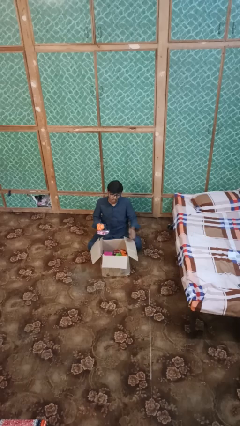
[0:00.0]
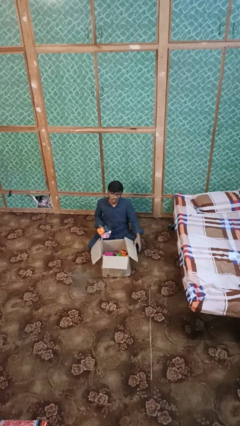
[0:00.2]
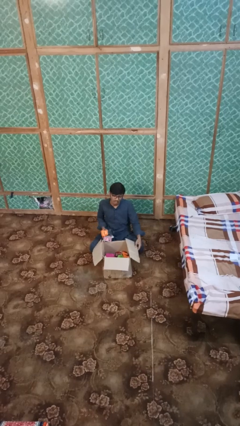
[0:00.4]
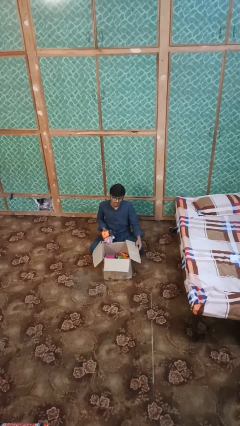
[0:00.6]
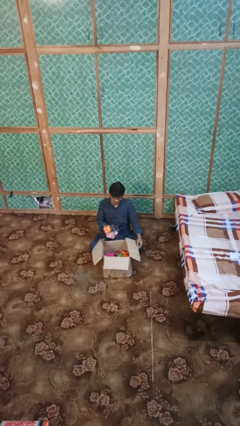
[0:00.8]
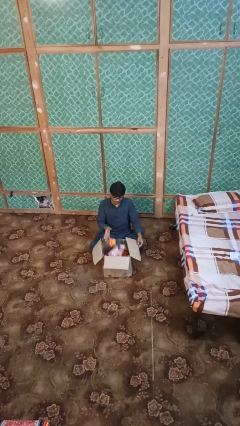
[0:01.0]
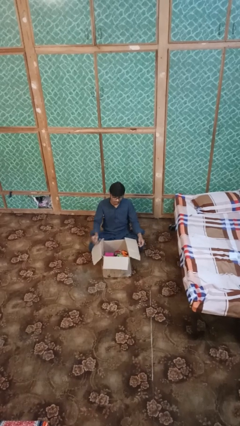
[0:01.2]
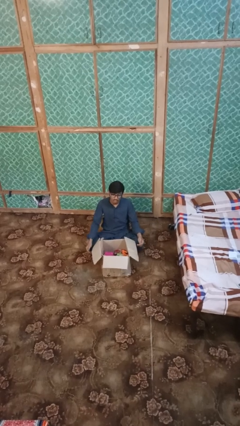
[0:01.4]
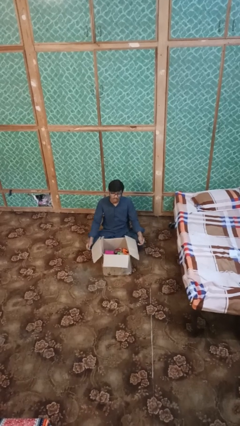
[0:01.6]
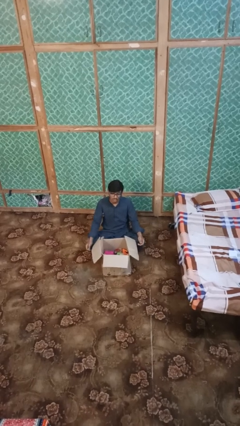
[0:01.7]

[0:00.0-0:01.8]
person puts object into box

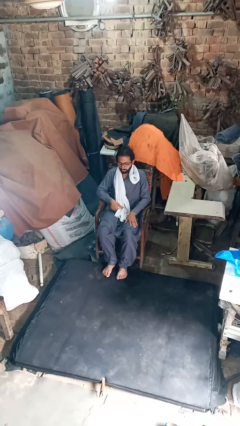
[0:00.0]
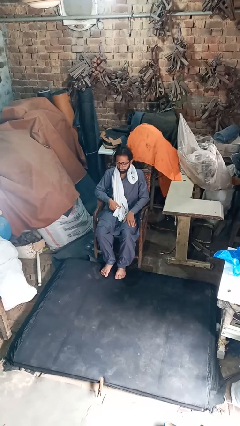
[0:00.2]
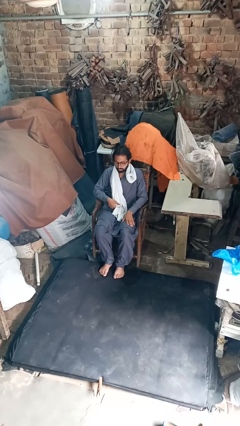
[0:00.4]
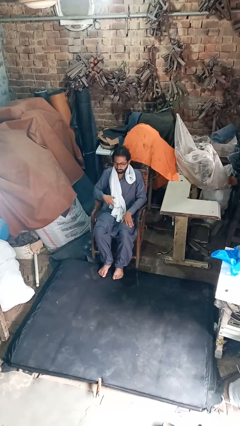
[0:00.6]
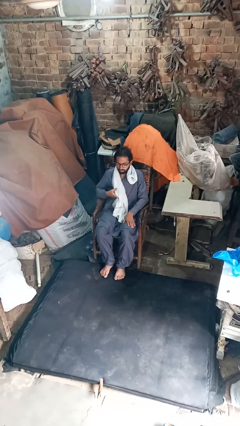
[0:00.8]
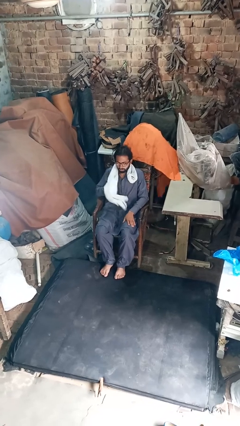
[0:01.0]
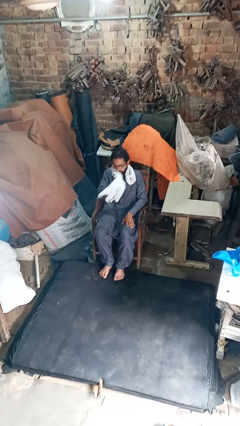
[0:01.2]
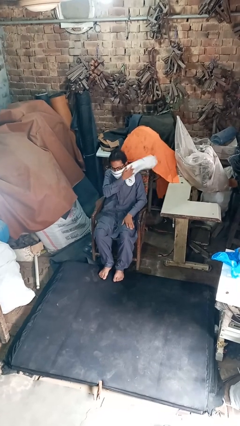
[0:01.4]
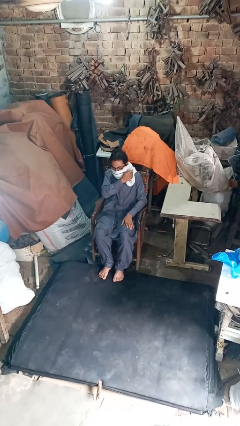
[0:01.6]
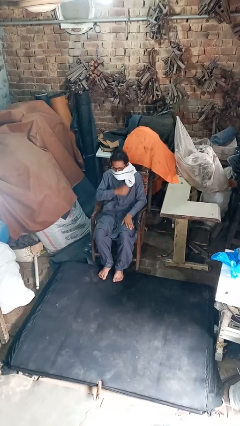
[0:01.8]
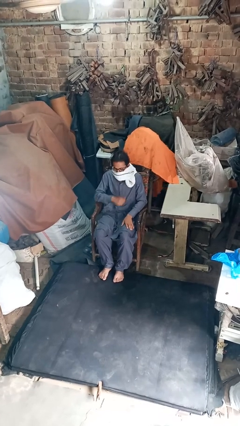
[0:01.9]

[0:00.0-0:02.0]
person puts on scarf

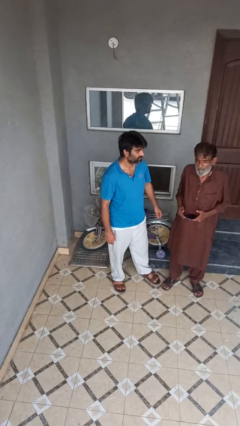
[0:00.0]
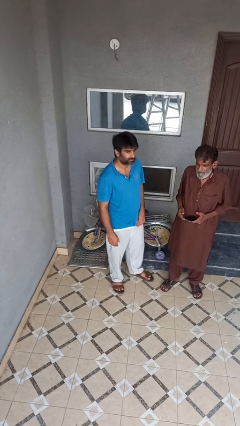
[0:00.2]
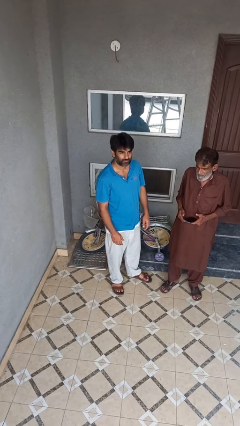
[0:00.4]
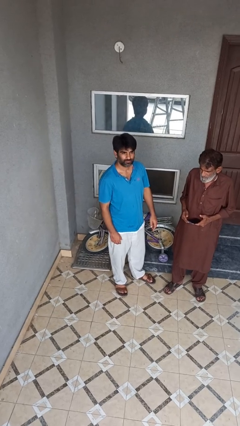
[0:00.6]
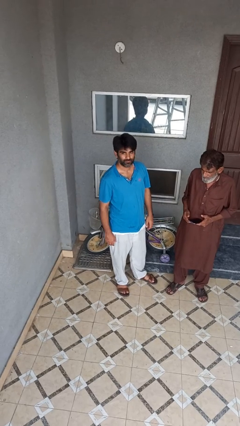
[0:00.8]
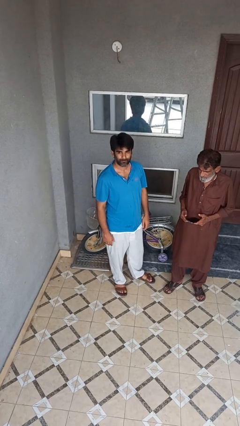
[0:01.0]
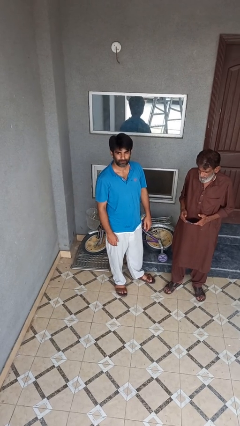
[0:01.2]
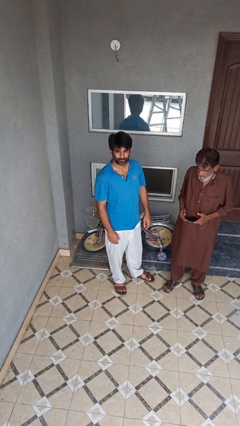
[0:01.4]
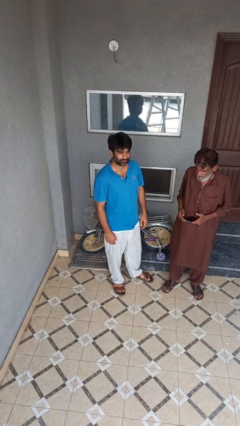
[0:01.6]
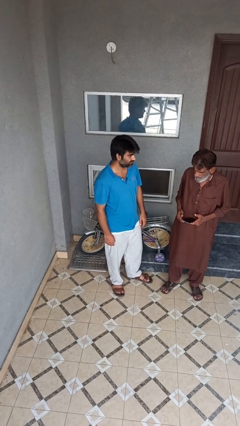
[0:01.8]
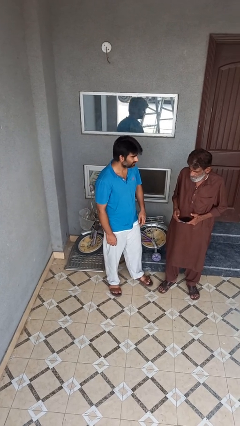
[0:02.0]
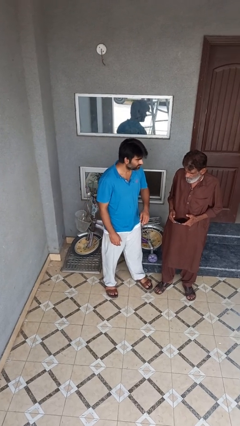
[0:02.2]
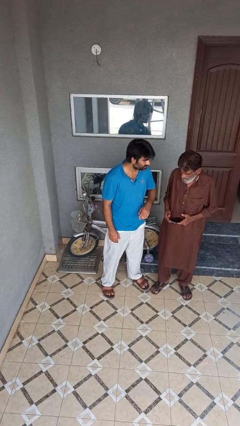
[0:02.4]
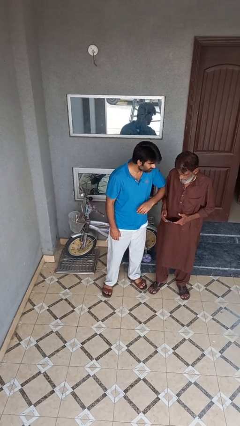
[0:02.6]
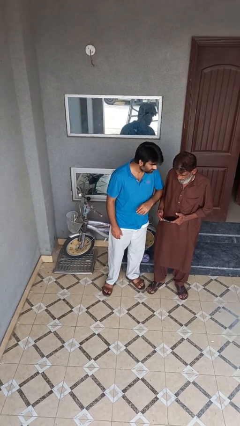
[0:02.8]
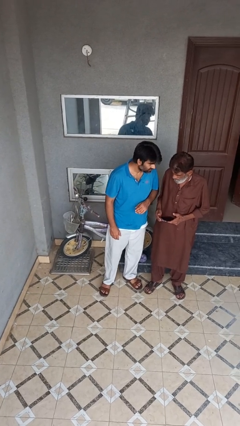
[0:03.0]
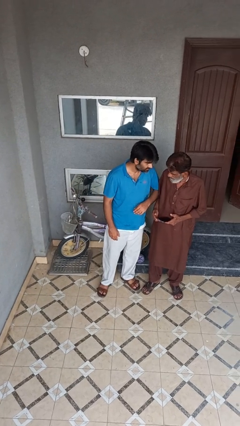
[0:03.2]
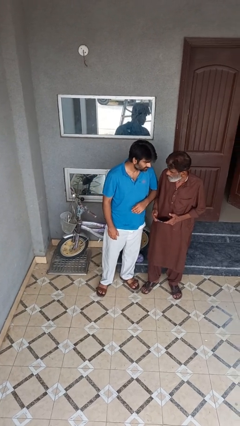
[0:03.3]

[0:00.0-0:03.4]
person kisses cheek of person

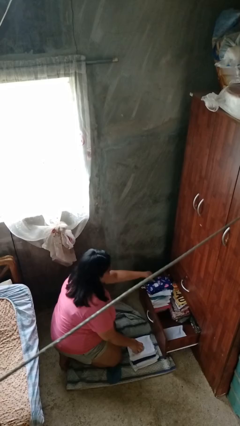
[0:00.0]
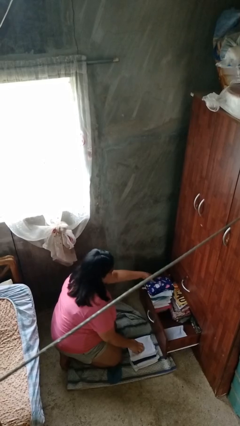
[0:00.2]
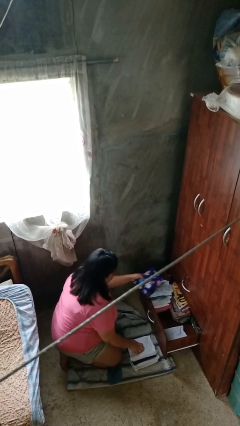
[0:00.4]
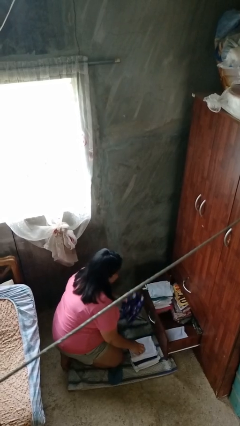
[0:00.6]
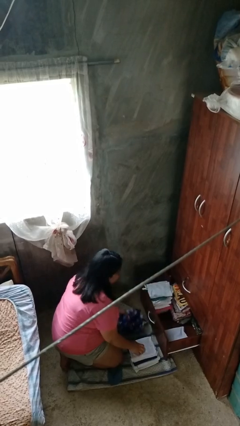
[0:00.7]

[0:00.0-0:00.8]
person takes clothes from dresser

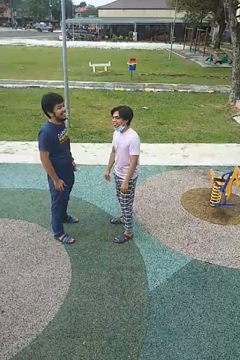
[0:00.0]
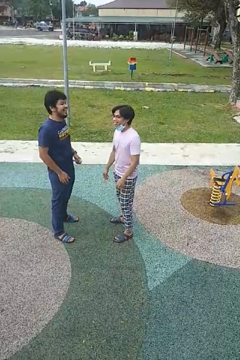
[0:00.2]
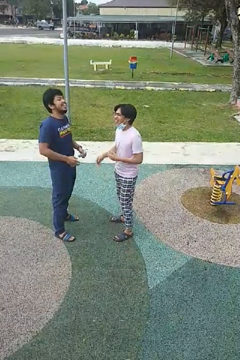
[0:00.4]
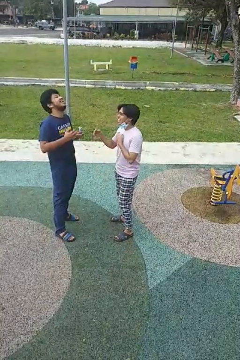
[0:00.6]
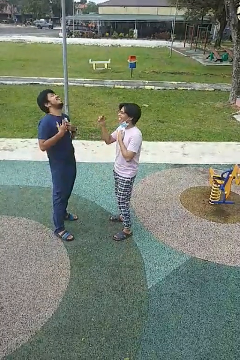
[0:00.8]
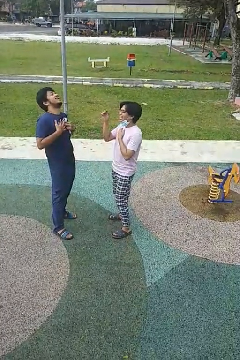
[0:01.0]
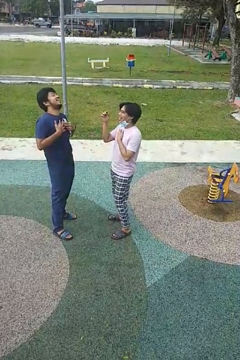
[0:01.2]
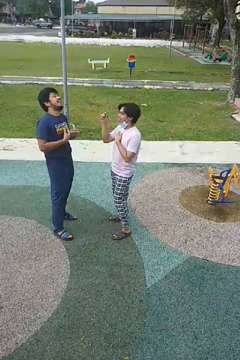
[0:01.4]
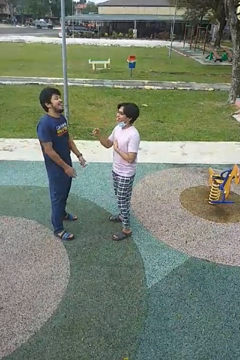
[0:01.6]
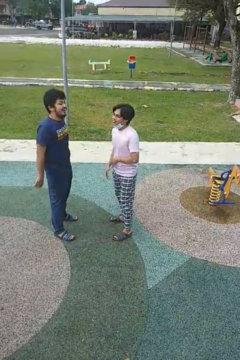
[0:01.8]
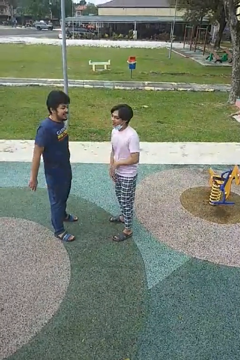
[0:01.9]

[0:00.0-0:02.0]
person laughs with person

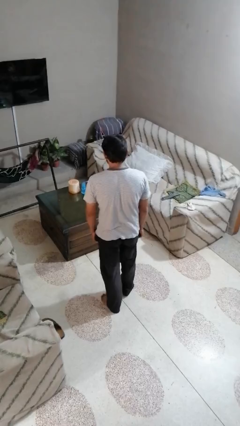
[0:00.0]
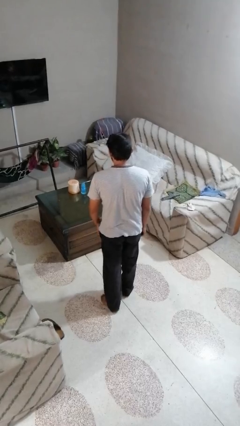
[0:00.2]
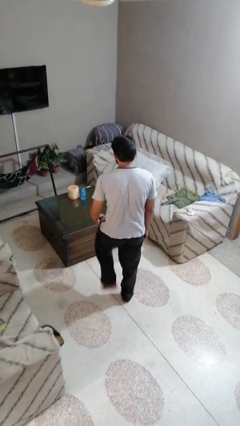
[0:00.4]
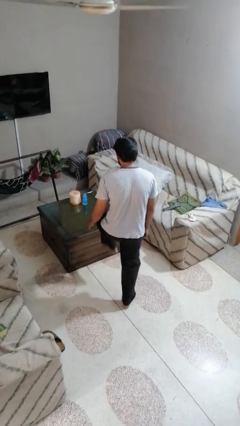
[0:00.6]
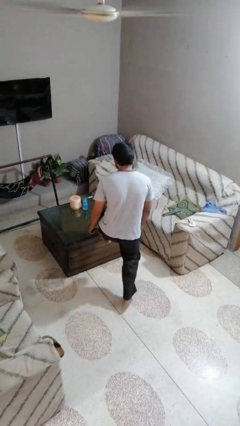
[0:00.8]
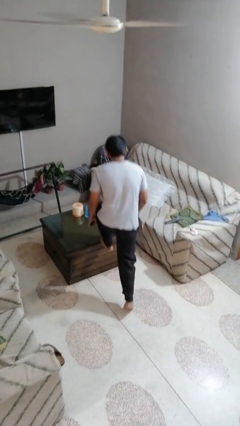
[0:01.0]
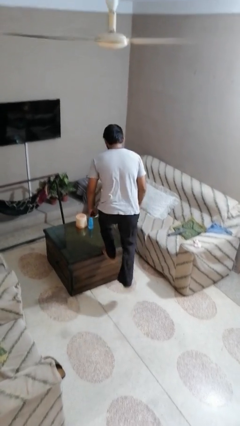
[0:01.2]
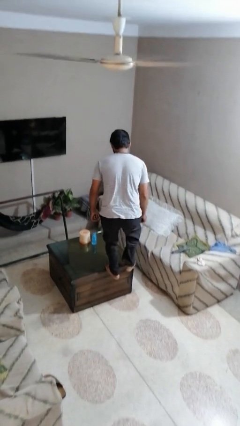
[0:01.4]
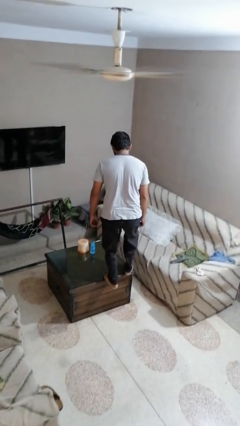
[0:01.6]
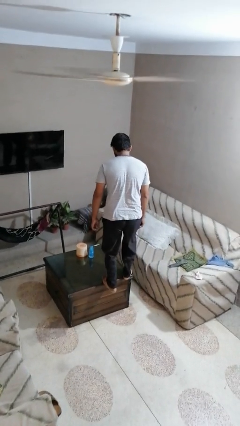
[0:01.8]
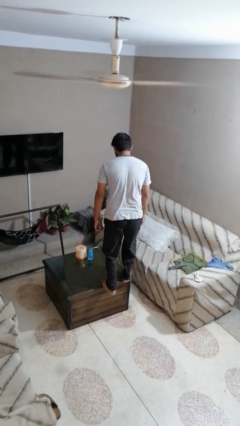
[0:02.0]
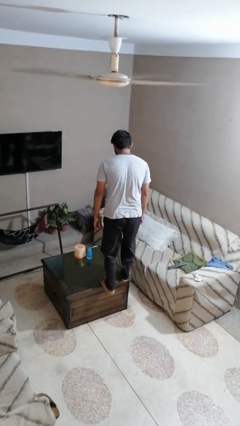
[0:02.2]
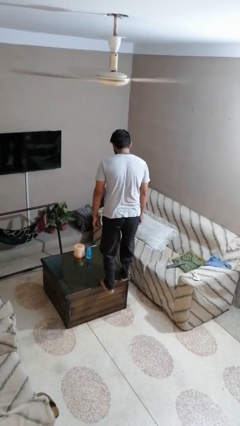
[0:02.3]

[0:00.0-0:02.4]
person climbs on table

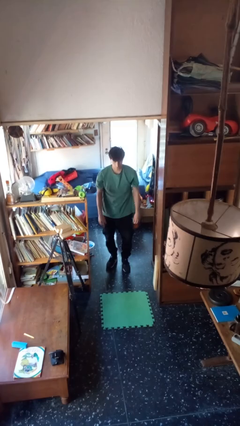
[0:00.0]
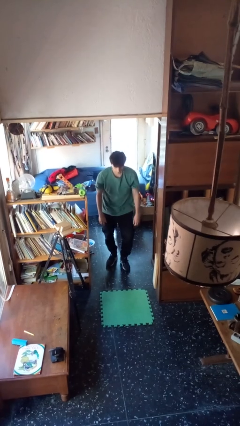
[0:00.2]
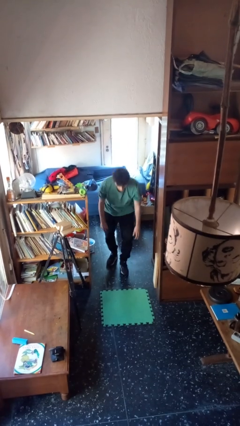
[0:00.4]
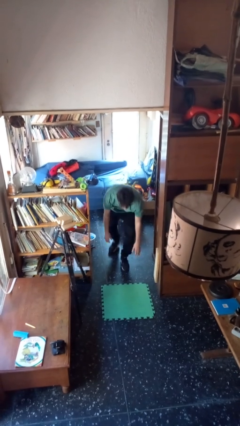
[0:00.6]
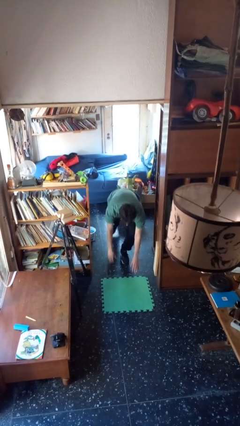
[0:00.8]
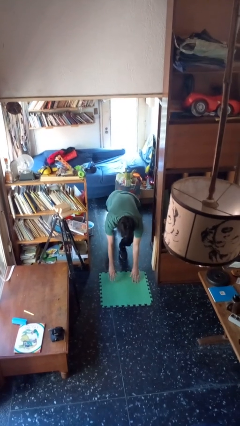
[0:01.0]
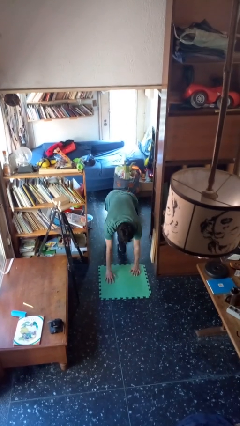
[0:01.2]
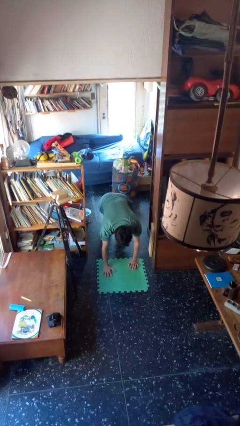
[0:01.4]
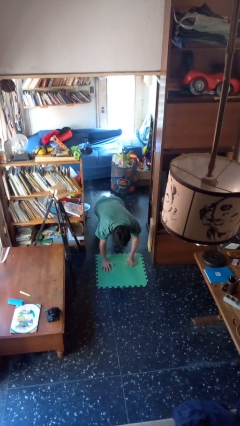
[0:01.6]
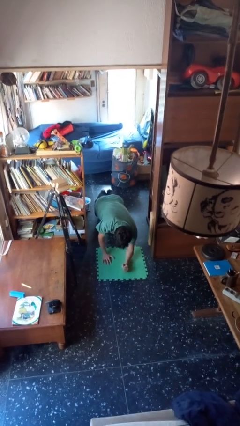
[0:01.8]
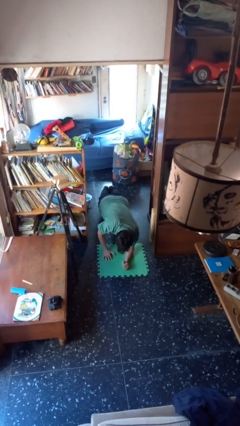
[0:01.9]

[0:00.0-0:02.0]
person exercises with plank

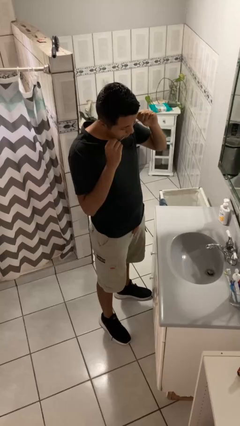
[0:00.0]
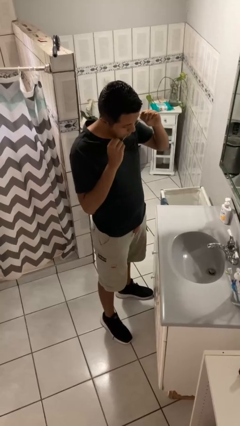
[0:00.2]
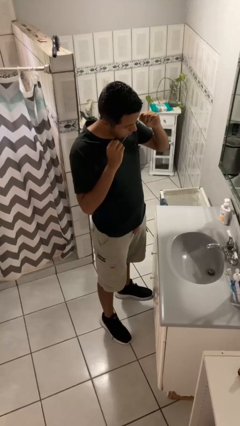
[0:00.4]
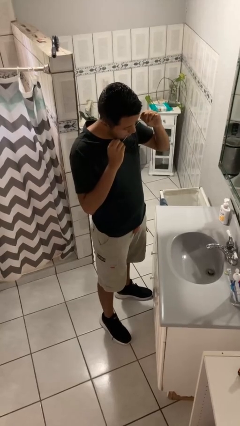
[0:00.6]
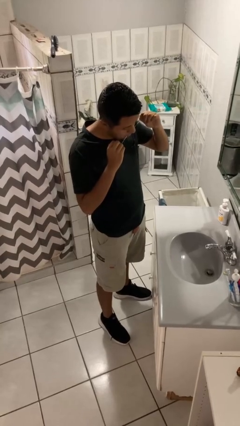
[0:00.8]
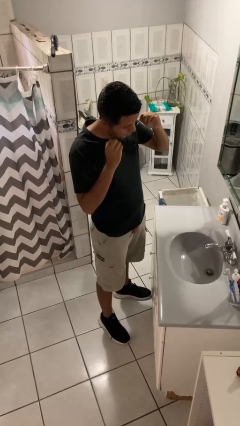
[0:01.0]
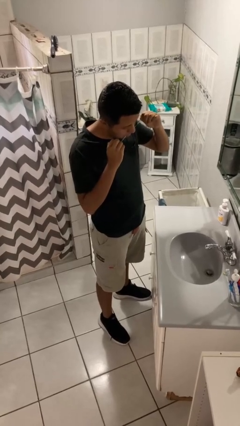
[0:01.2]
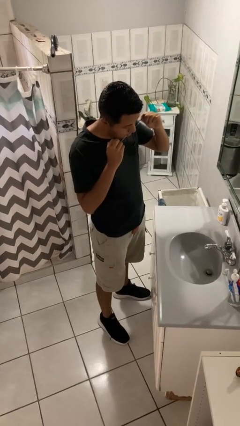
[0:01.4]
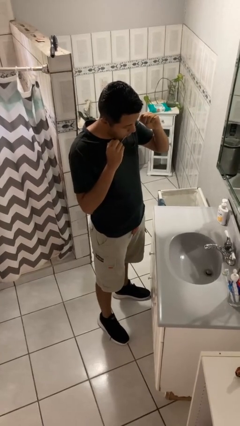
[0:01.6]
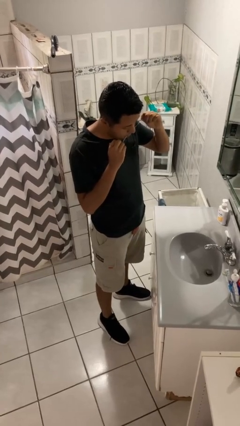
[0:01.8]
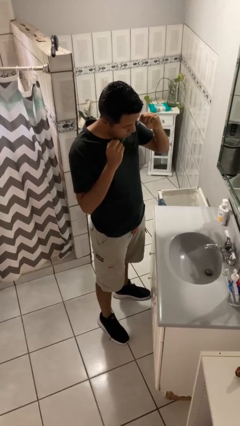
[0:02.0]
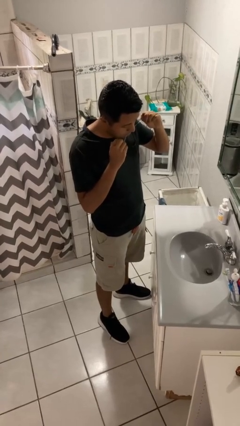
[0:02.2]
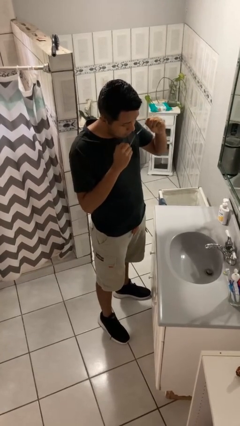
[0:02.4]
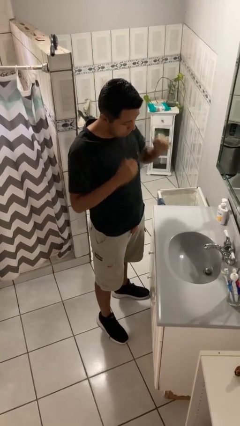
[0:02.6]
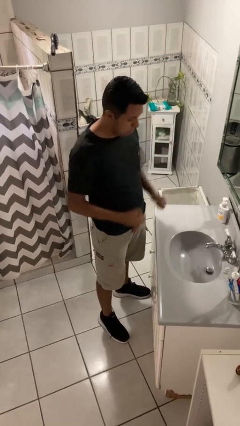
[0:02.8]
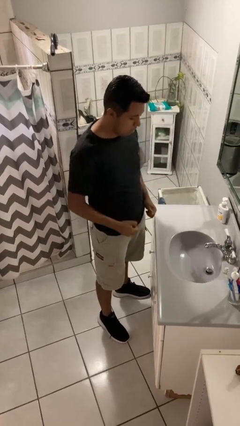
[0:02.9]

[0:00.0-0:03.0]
person flosses
